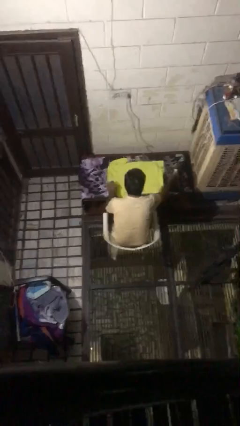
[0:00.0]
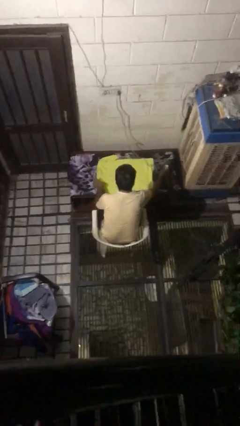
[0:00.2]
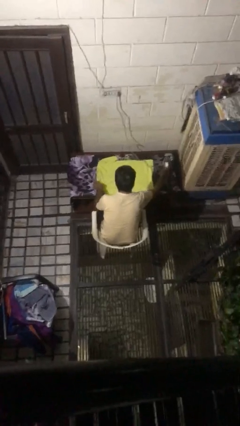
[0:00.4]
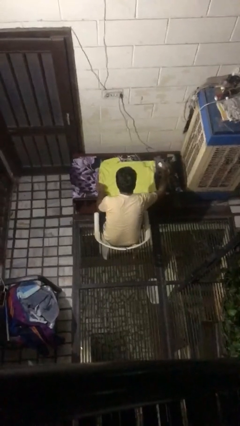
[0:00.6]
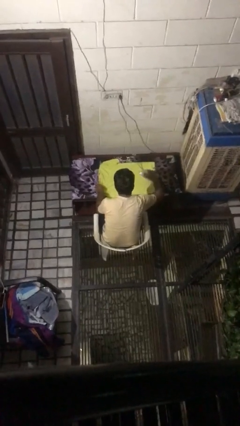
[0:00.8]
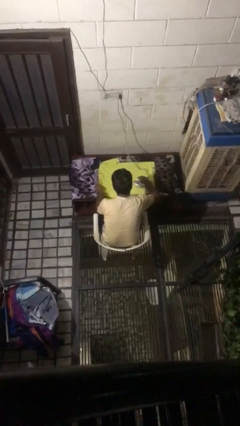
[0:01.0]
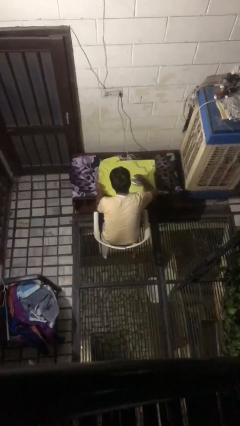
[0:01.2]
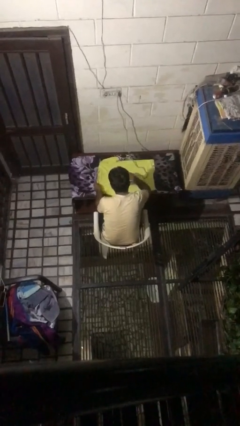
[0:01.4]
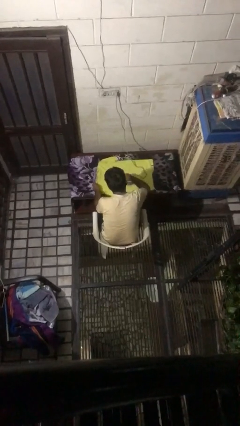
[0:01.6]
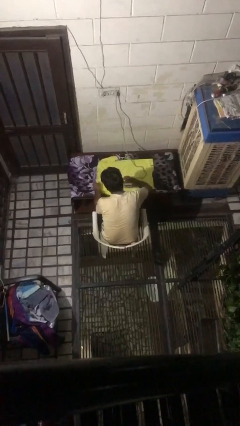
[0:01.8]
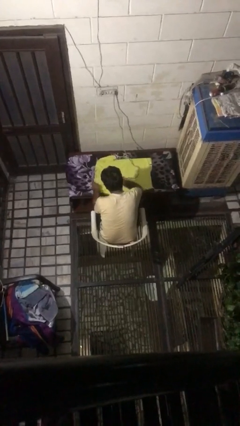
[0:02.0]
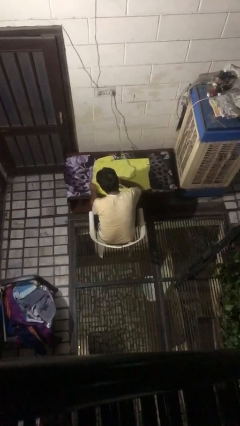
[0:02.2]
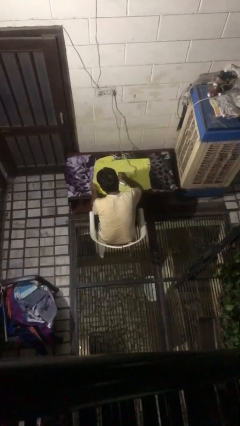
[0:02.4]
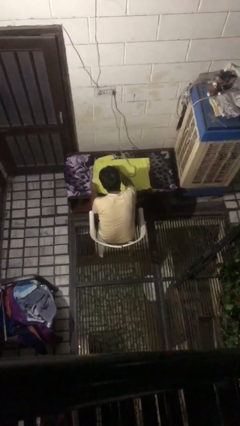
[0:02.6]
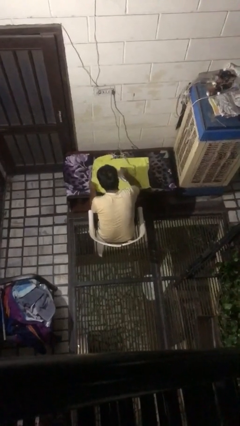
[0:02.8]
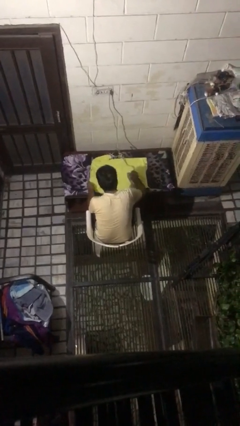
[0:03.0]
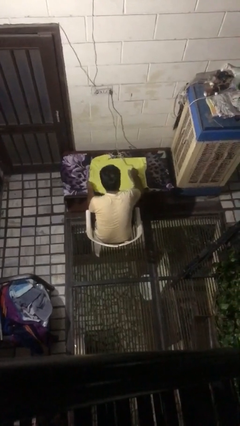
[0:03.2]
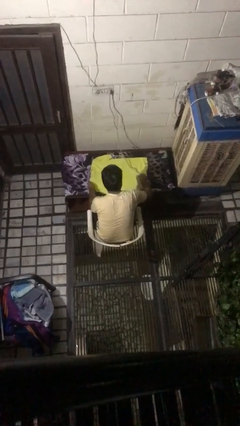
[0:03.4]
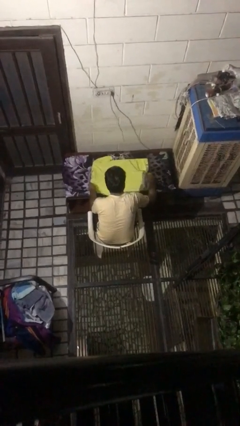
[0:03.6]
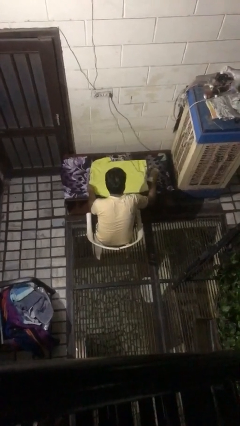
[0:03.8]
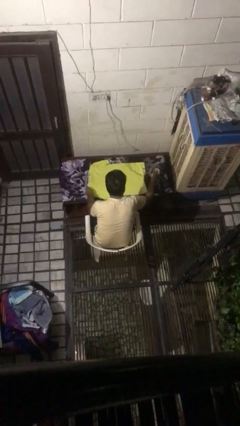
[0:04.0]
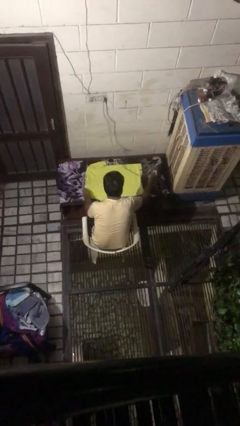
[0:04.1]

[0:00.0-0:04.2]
person irons clothes

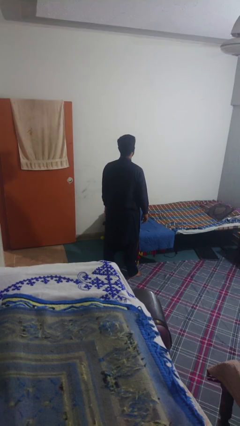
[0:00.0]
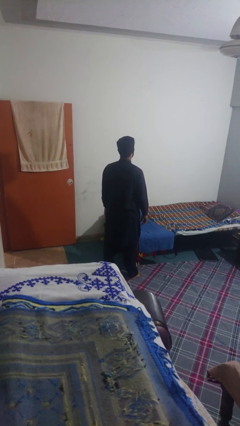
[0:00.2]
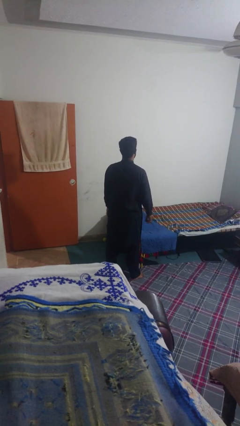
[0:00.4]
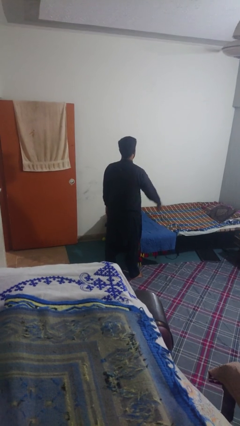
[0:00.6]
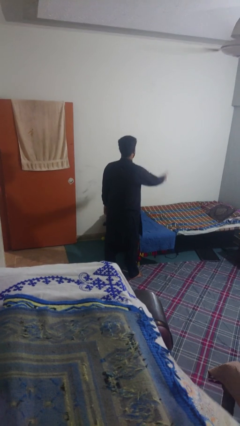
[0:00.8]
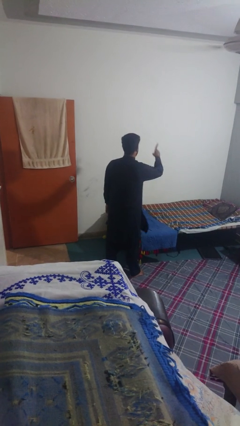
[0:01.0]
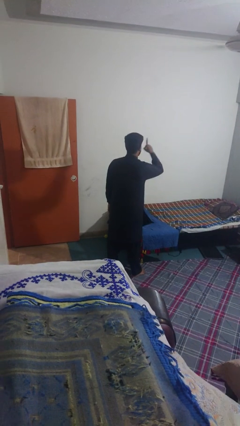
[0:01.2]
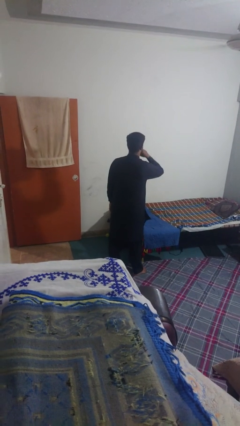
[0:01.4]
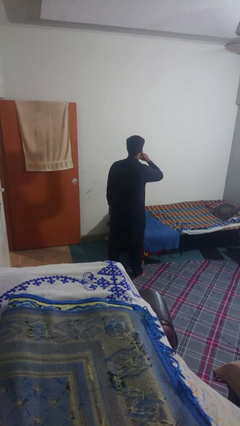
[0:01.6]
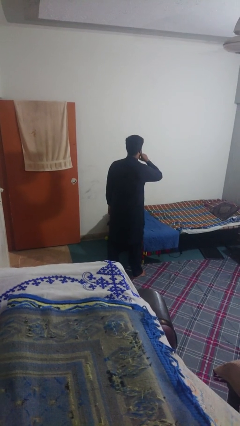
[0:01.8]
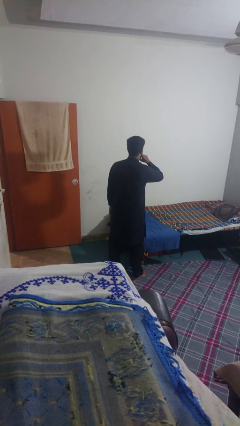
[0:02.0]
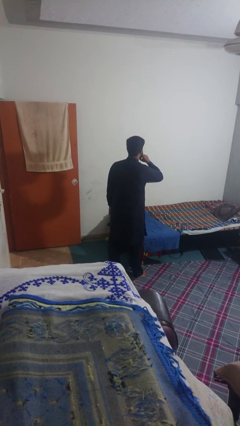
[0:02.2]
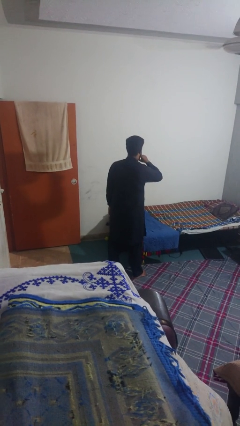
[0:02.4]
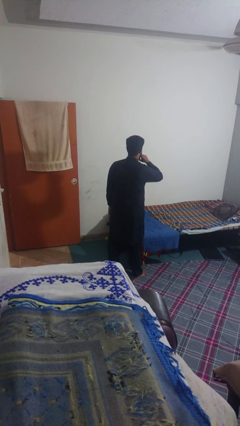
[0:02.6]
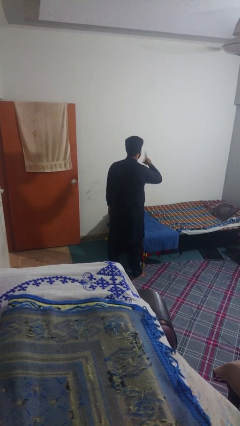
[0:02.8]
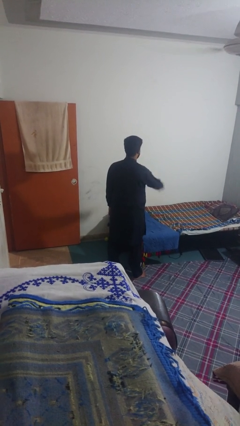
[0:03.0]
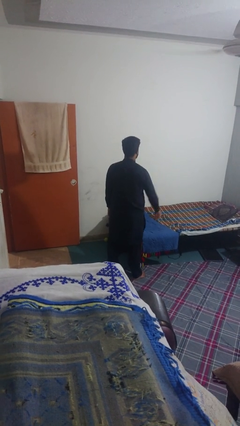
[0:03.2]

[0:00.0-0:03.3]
person gestures be quiet

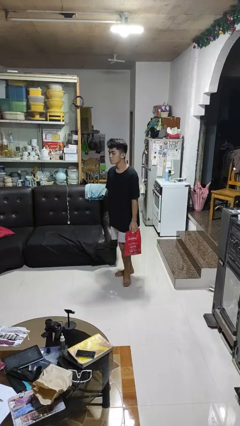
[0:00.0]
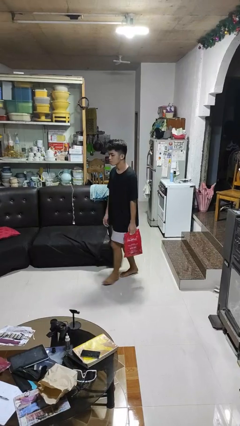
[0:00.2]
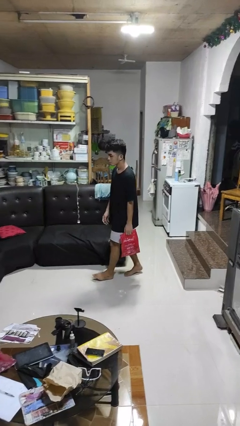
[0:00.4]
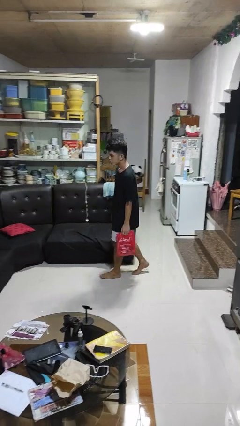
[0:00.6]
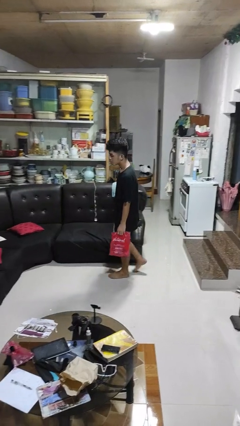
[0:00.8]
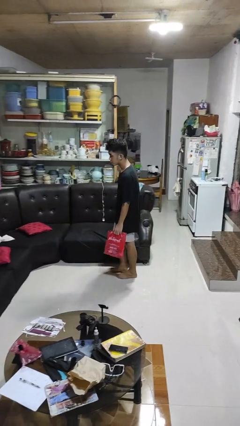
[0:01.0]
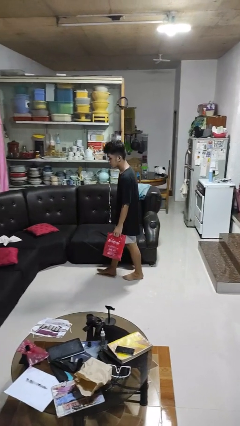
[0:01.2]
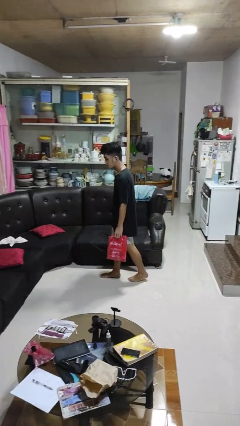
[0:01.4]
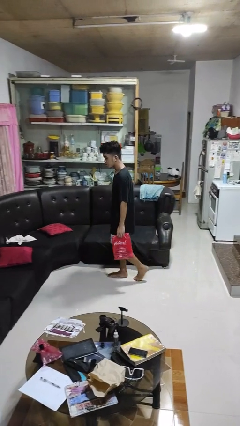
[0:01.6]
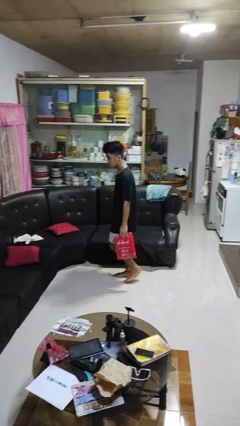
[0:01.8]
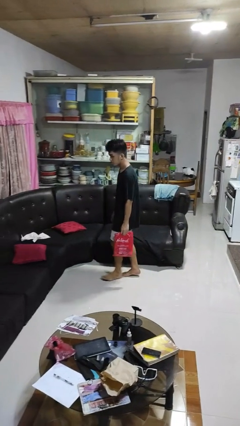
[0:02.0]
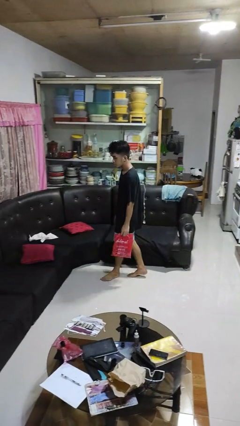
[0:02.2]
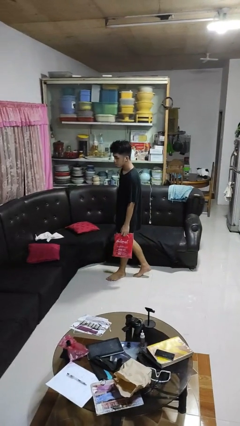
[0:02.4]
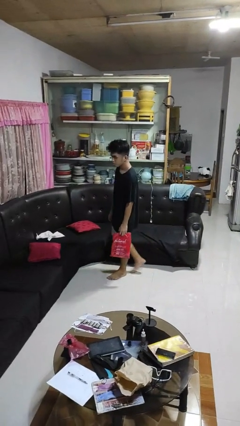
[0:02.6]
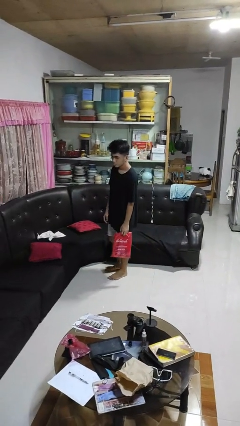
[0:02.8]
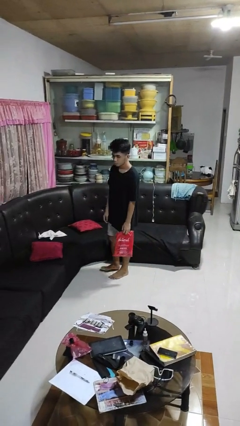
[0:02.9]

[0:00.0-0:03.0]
person carries groceries

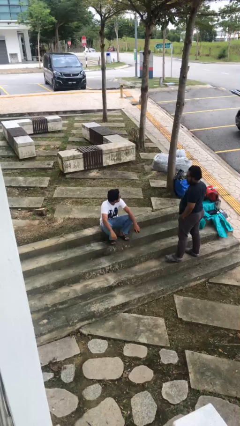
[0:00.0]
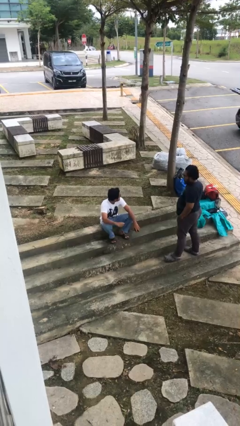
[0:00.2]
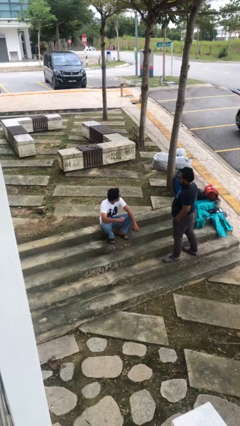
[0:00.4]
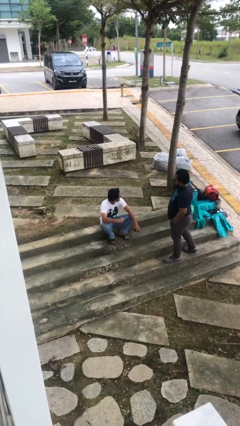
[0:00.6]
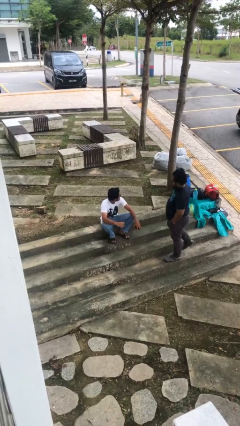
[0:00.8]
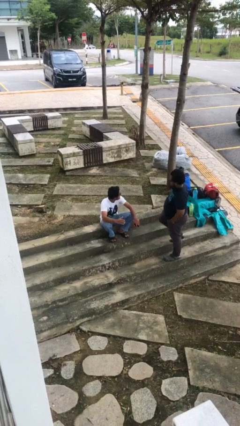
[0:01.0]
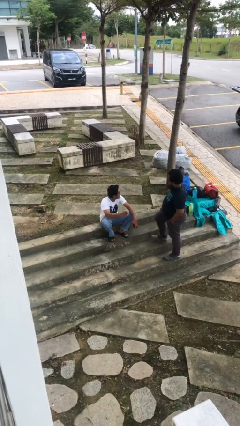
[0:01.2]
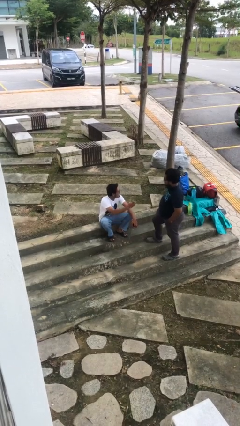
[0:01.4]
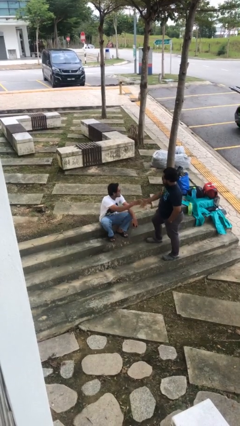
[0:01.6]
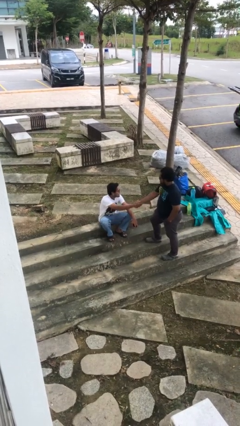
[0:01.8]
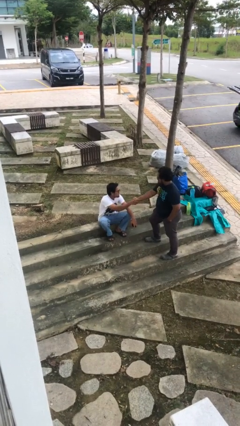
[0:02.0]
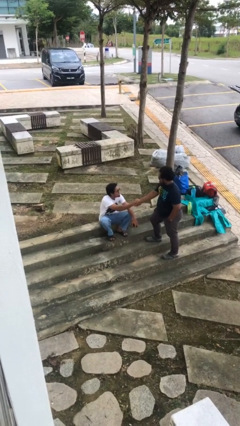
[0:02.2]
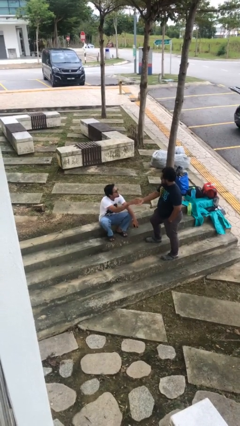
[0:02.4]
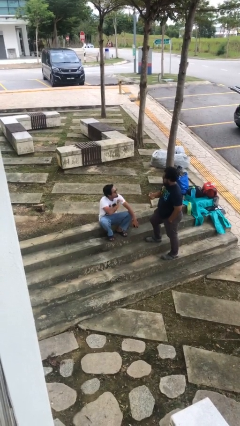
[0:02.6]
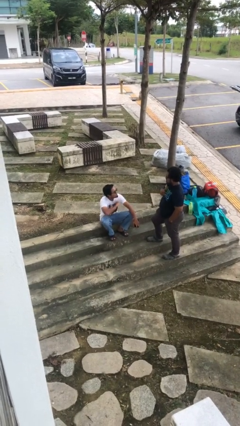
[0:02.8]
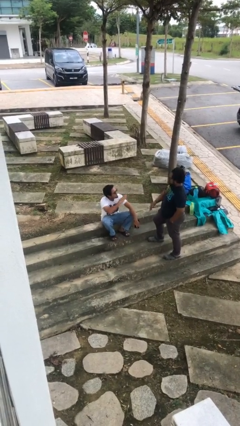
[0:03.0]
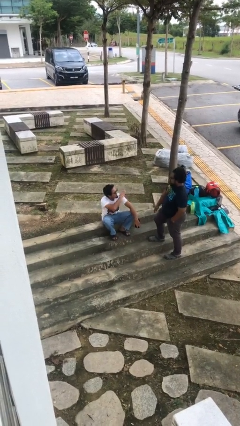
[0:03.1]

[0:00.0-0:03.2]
person shakes hand

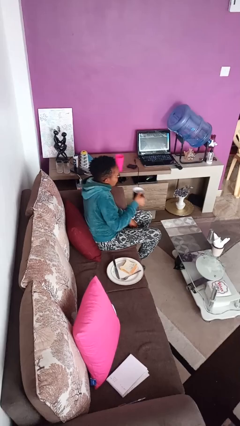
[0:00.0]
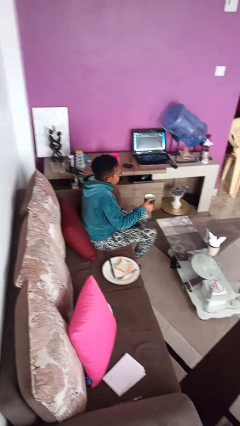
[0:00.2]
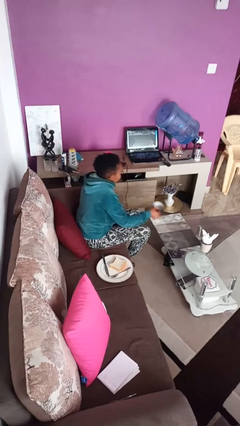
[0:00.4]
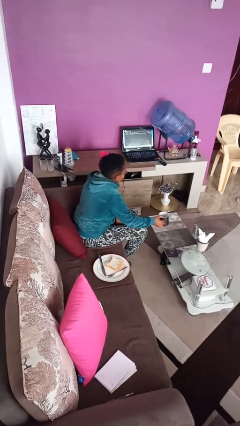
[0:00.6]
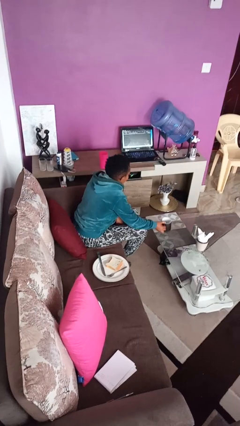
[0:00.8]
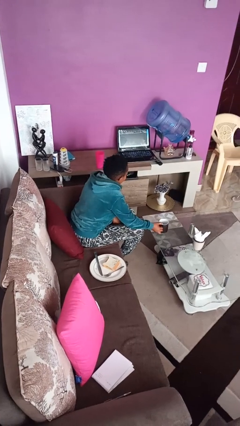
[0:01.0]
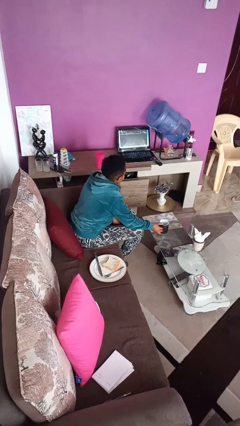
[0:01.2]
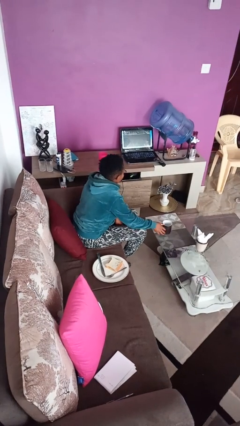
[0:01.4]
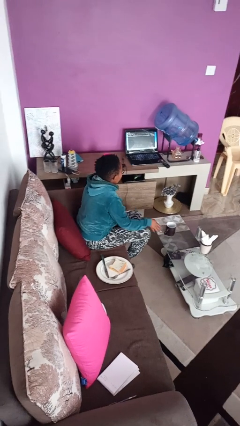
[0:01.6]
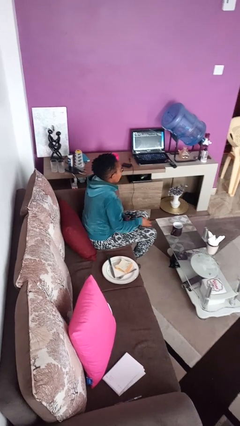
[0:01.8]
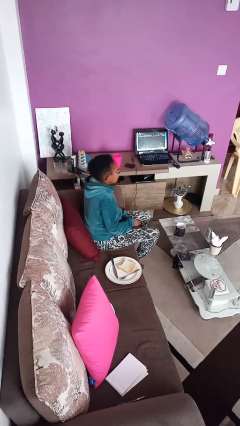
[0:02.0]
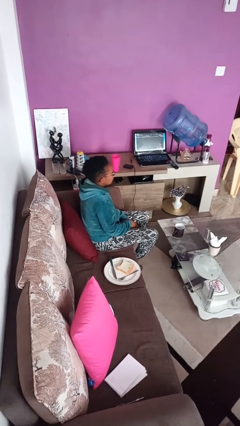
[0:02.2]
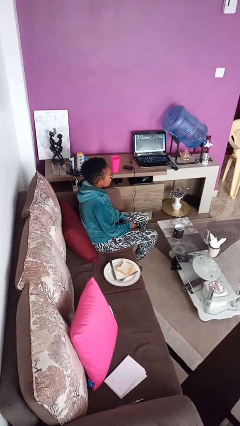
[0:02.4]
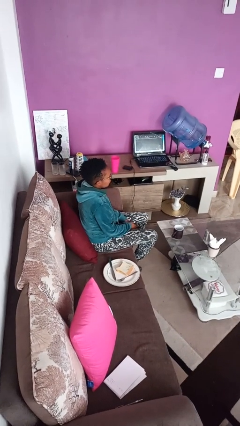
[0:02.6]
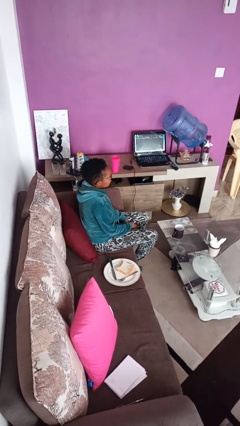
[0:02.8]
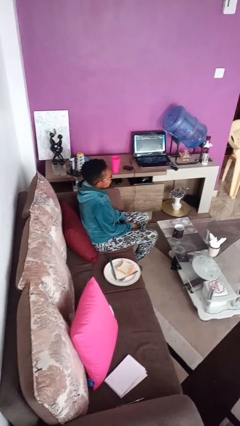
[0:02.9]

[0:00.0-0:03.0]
person puts down object on table

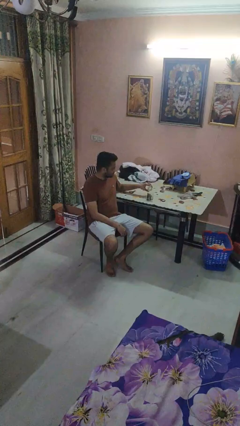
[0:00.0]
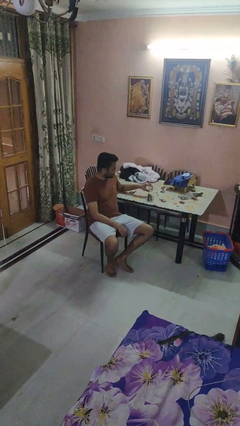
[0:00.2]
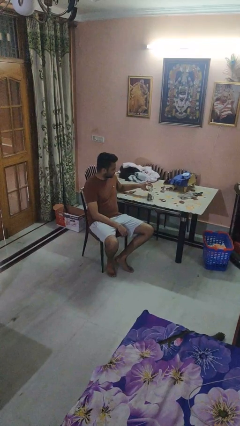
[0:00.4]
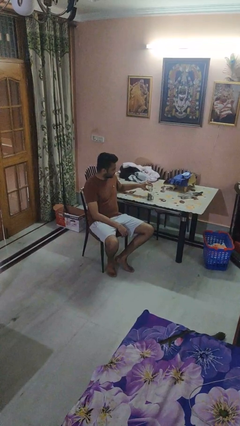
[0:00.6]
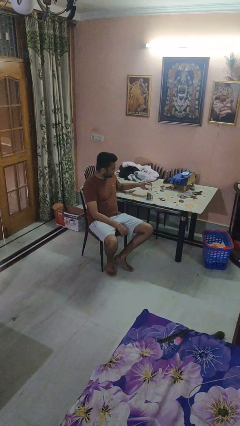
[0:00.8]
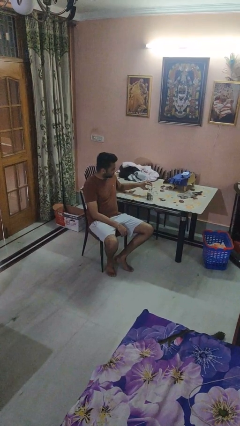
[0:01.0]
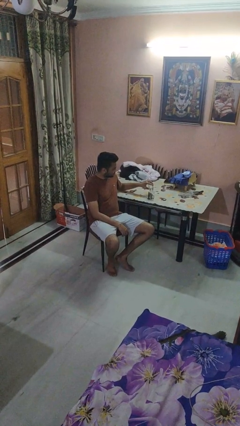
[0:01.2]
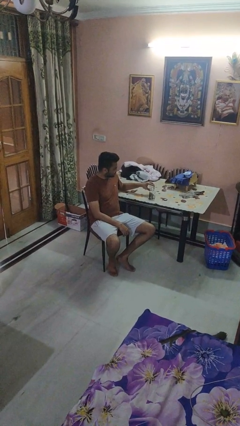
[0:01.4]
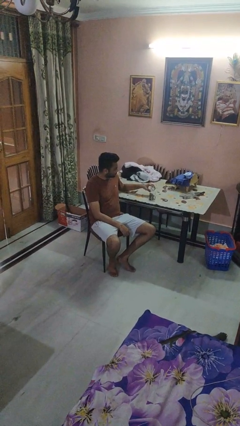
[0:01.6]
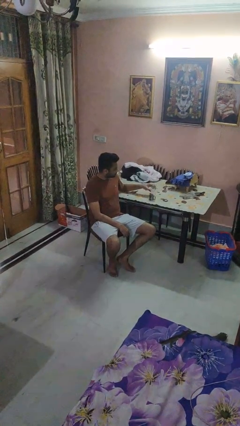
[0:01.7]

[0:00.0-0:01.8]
person pours liquid into cup
